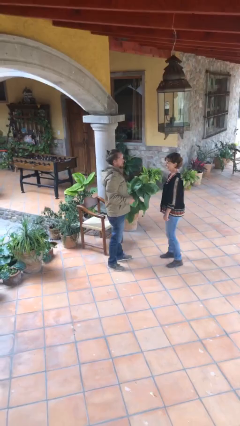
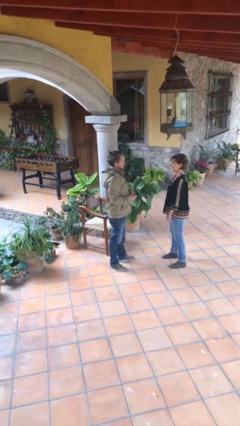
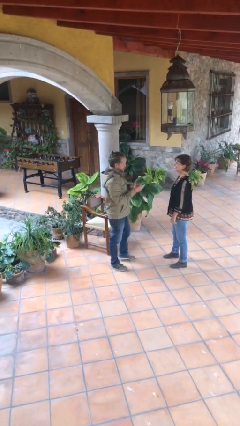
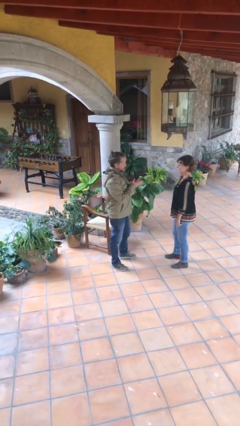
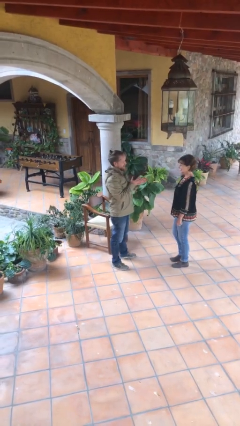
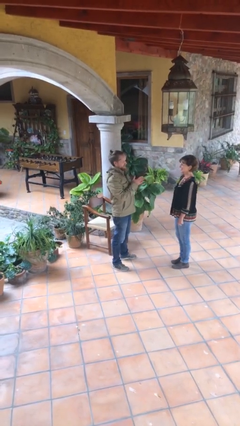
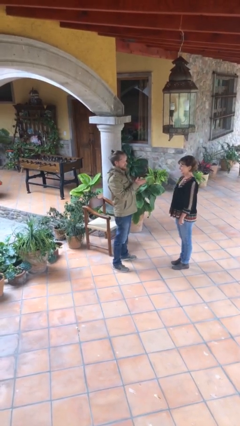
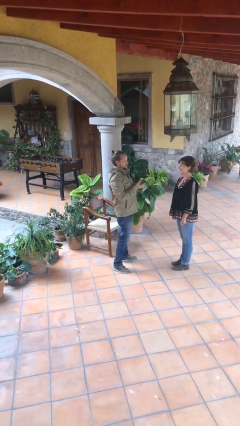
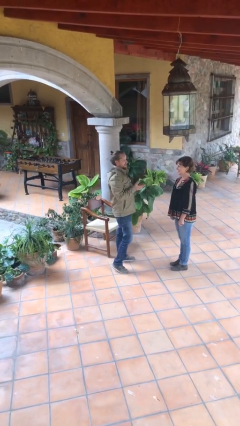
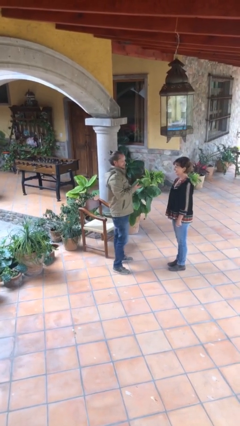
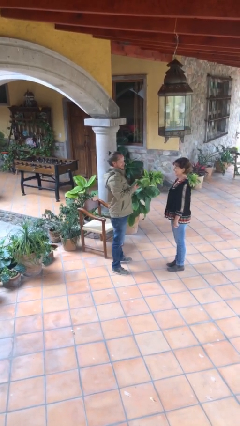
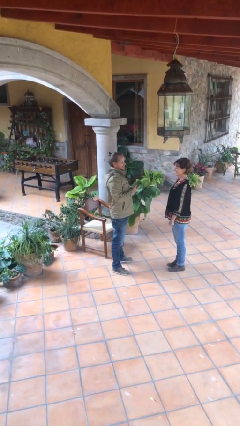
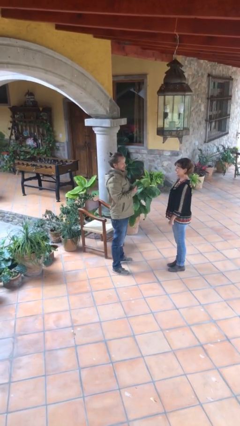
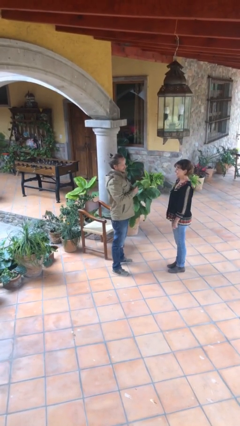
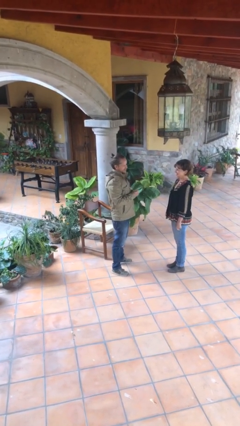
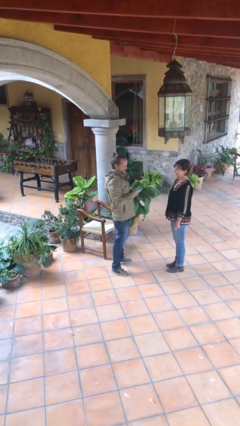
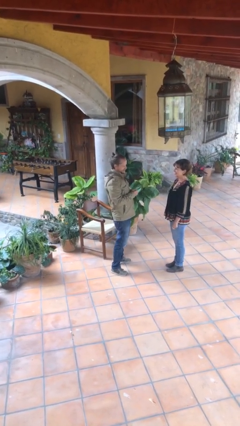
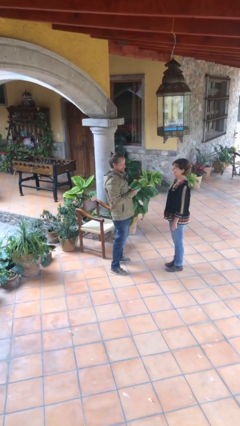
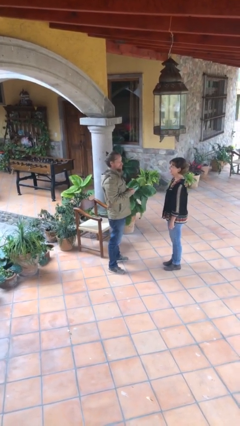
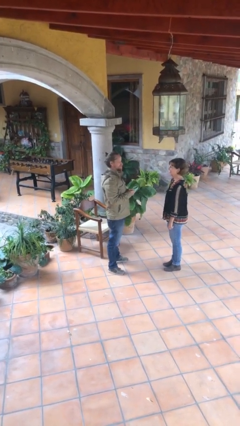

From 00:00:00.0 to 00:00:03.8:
person talks to person

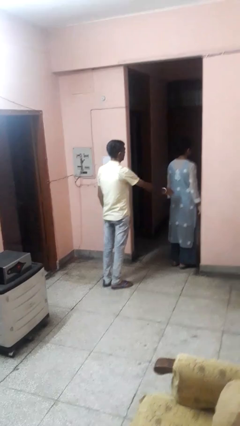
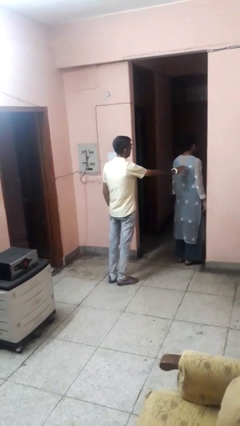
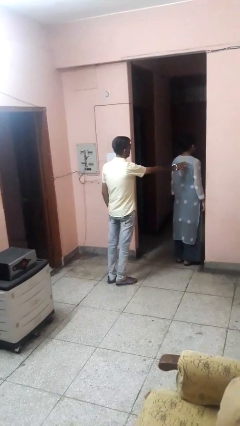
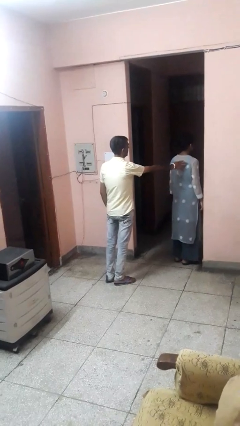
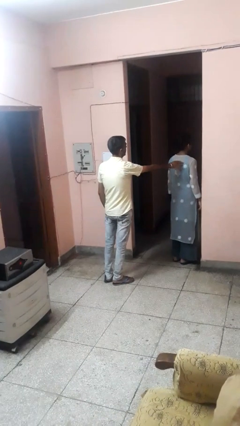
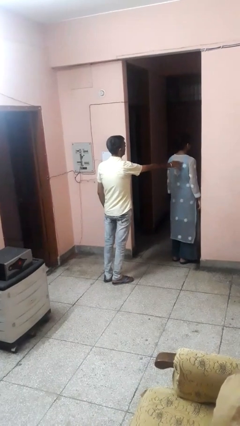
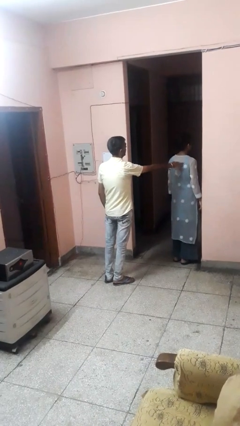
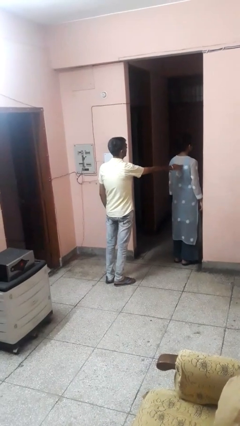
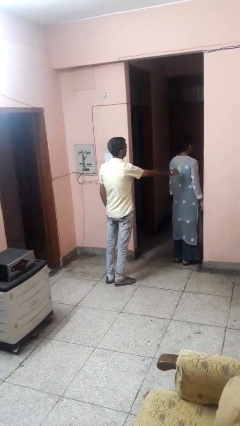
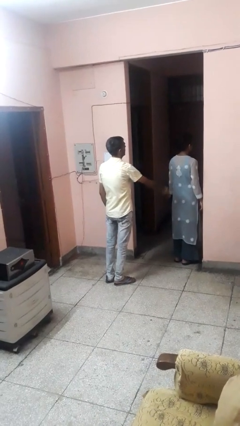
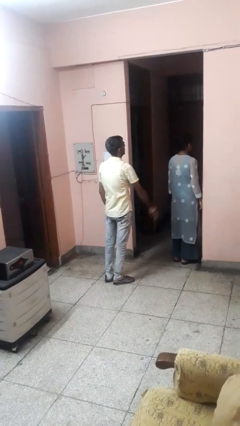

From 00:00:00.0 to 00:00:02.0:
person touches back of person

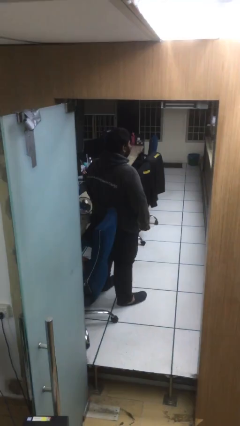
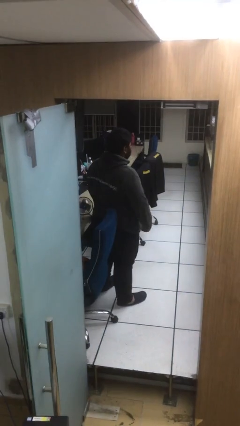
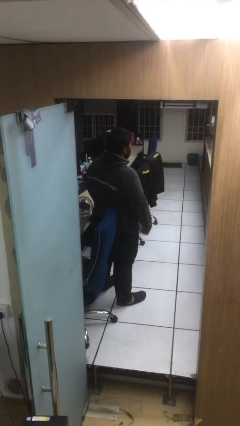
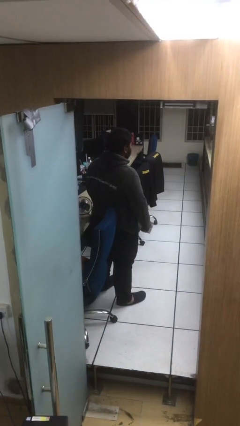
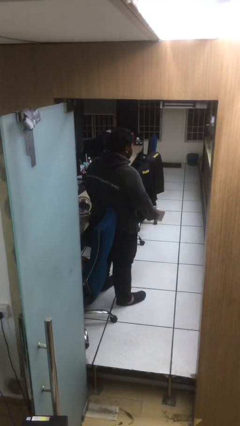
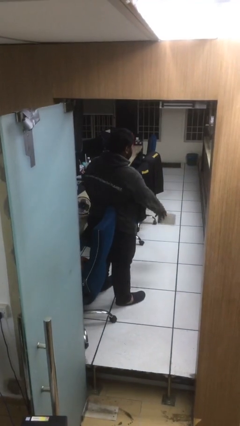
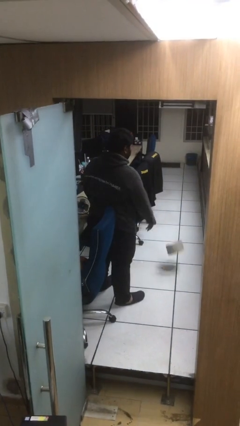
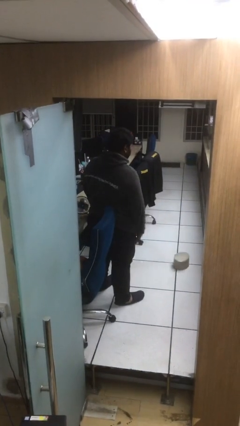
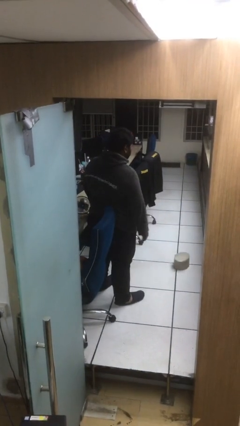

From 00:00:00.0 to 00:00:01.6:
person throws object to ground

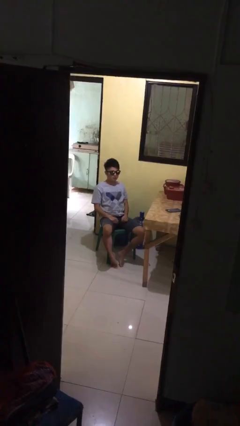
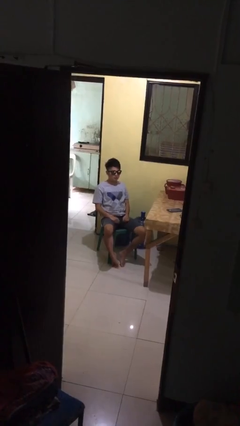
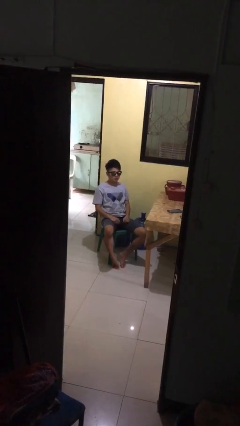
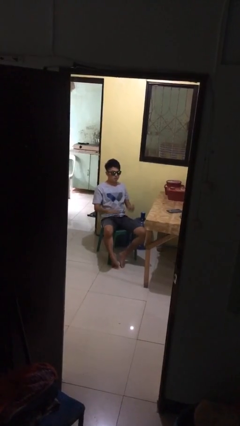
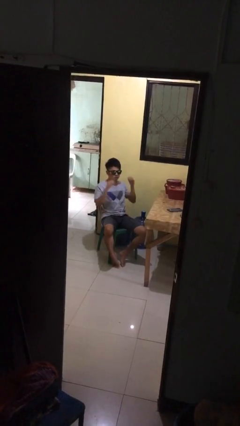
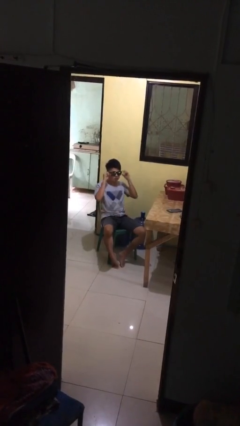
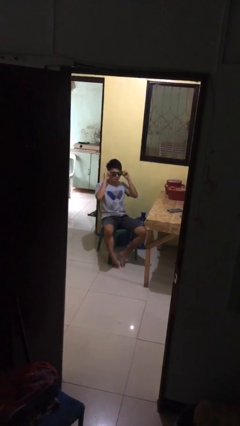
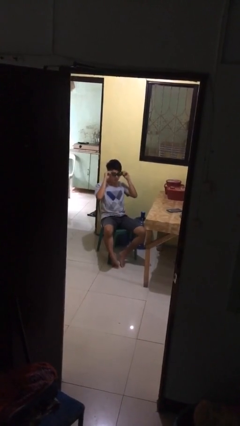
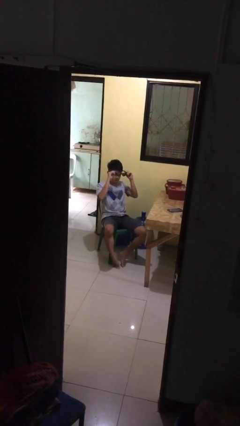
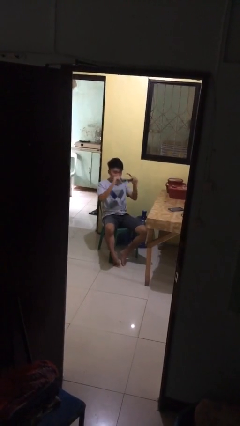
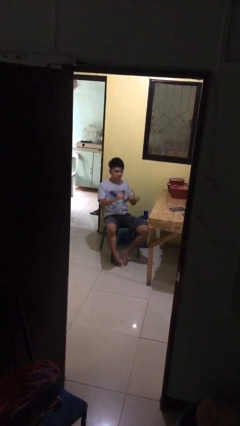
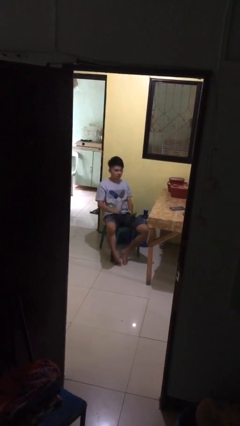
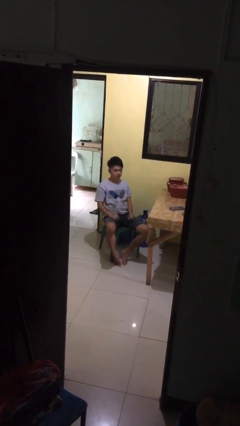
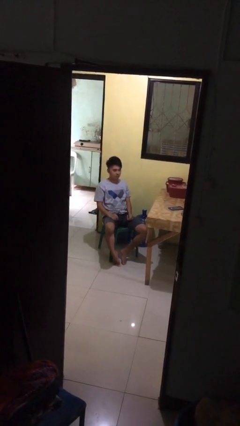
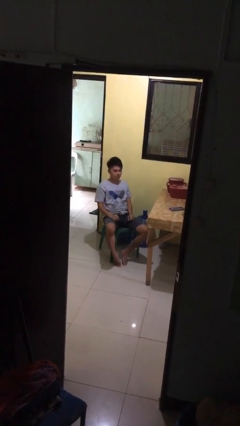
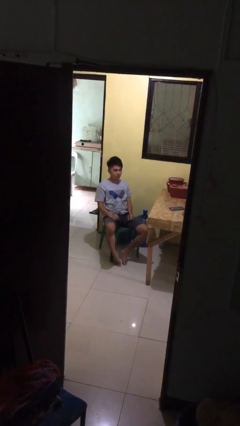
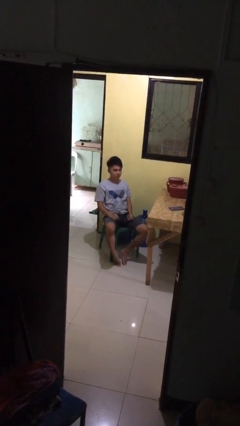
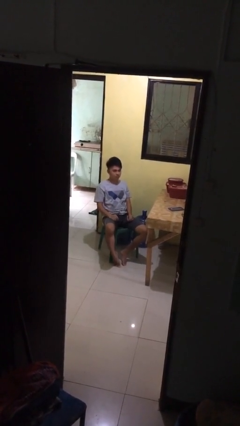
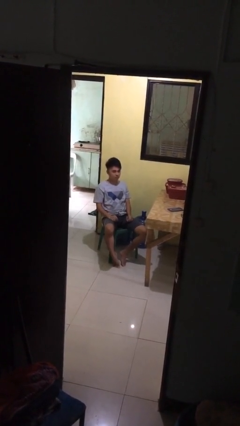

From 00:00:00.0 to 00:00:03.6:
person takes off sunglasses

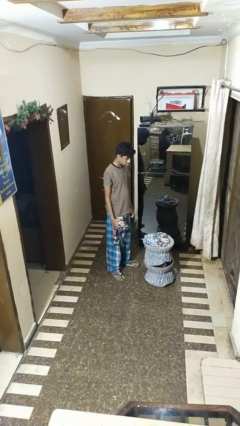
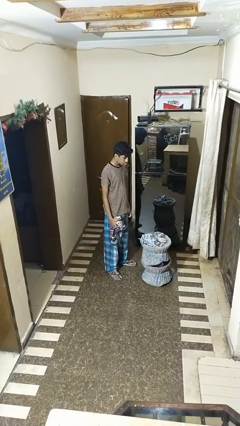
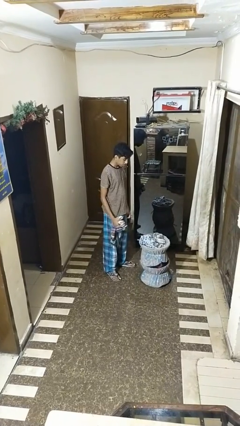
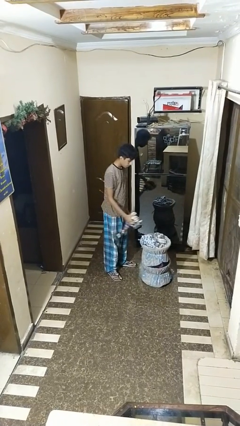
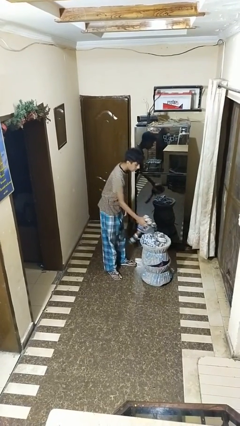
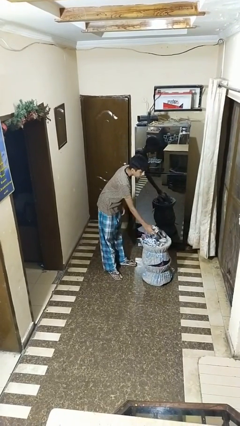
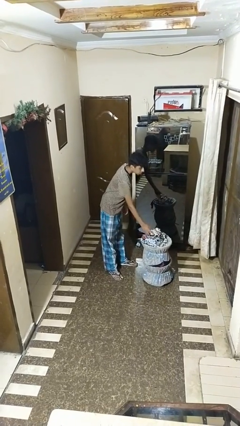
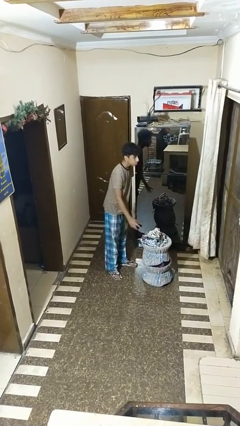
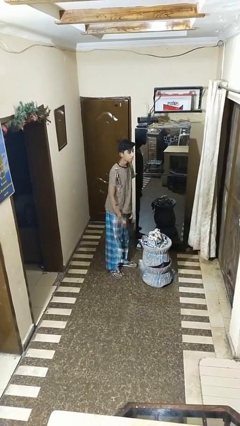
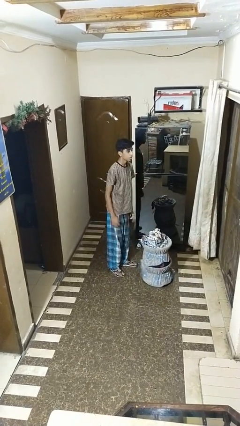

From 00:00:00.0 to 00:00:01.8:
person puts object into basket

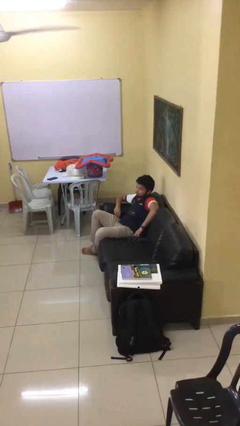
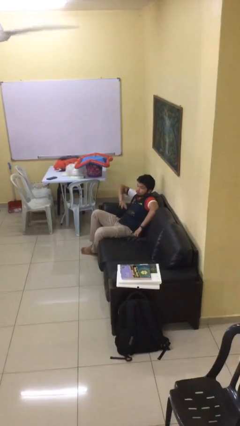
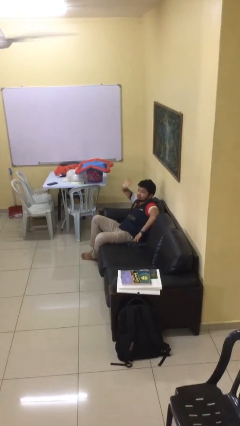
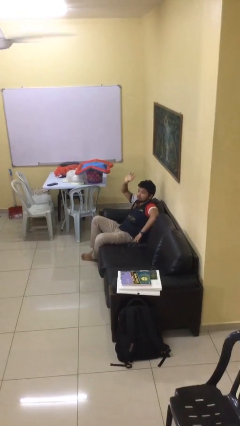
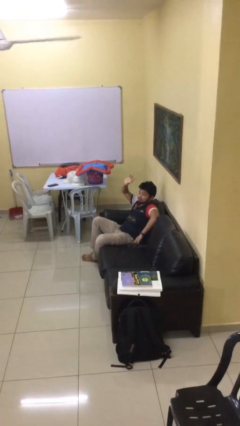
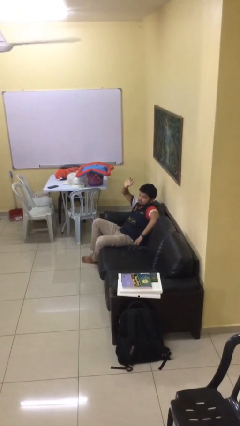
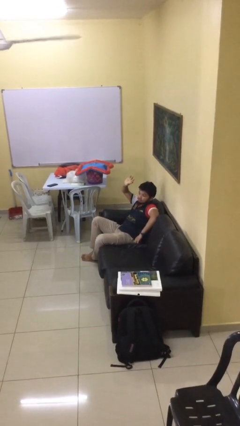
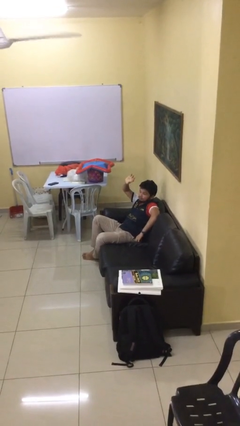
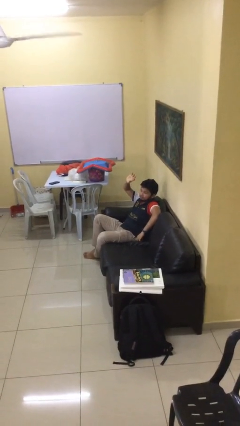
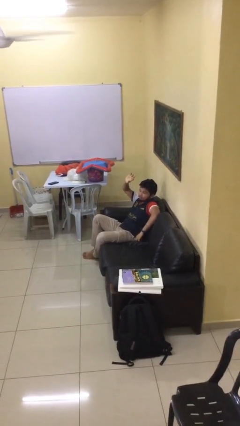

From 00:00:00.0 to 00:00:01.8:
person gestures swipe up

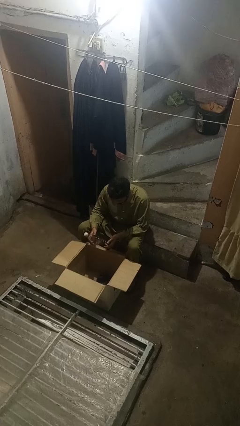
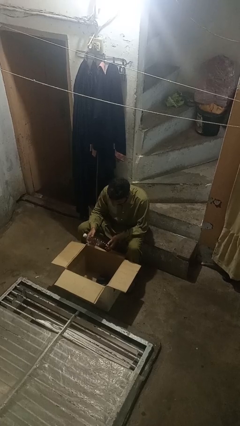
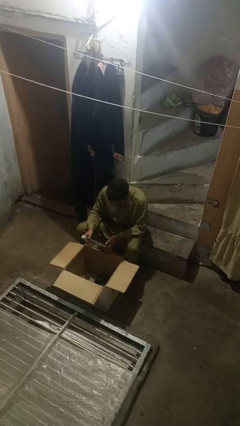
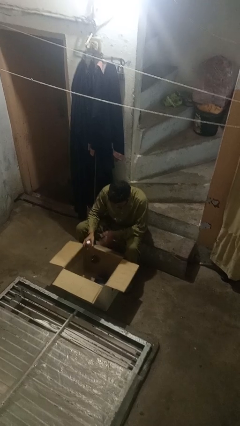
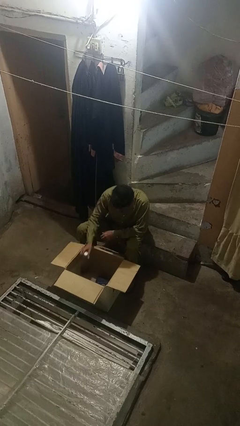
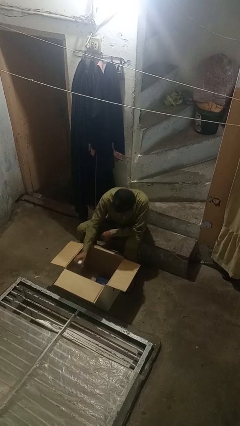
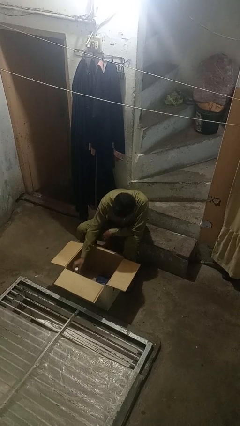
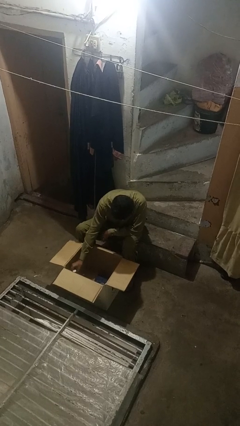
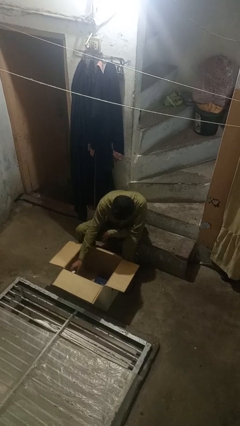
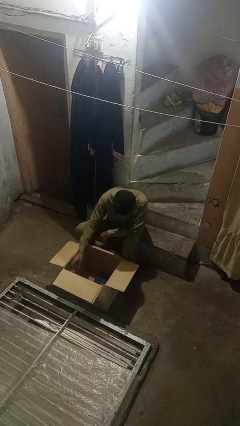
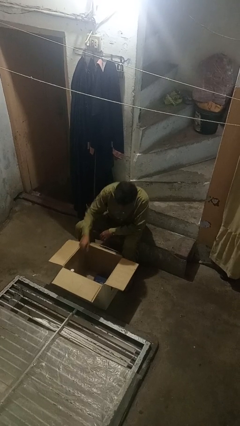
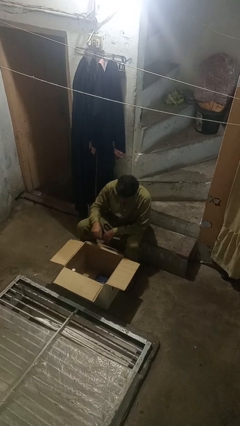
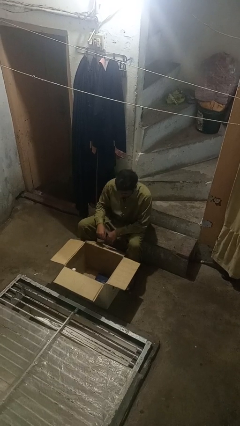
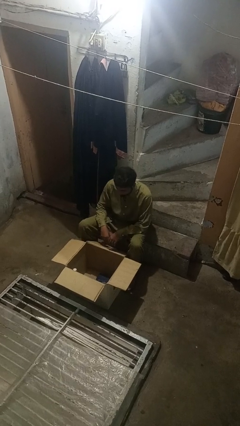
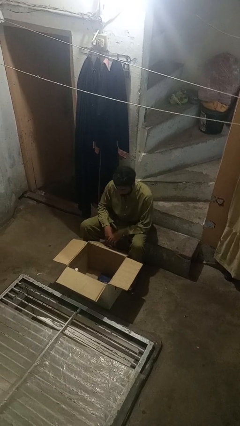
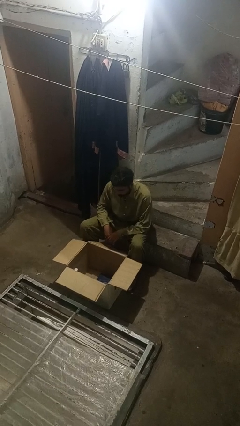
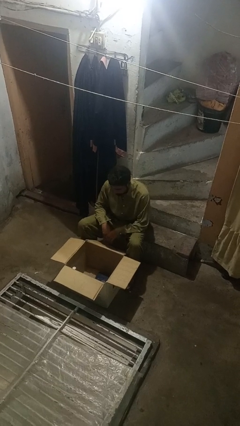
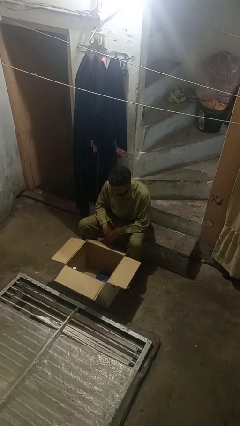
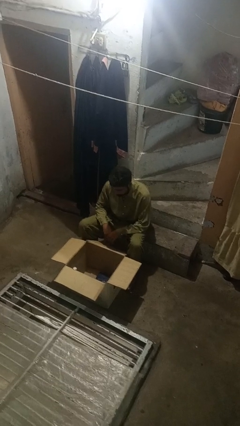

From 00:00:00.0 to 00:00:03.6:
person puts object into box
